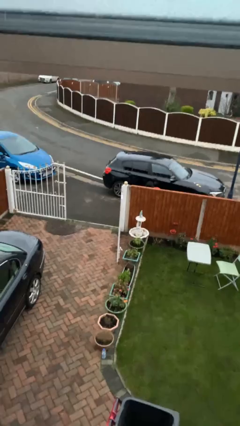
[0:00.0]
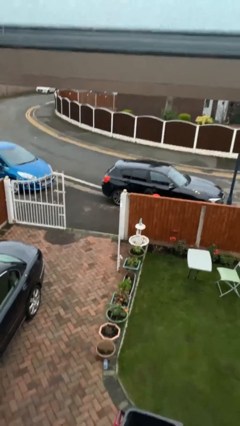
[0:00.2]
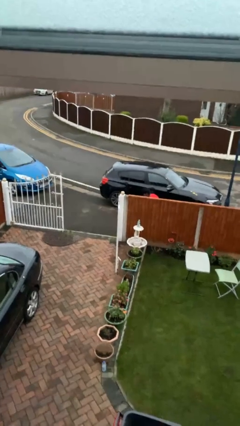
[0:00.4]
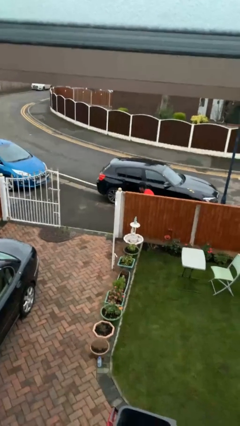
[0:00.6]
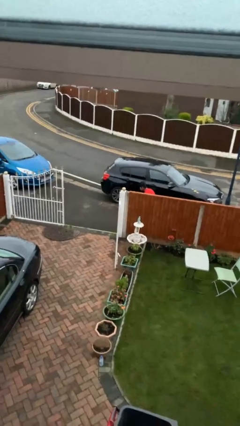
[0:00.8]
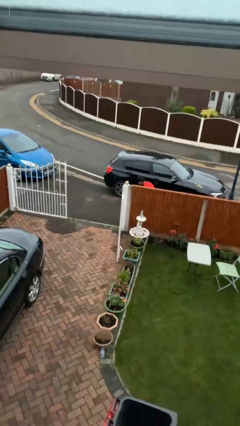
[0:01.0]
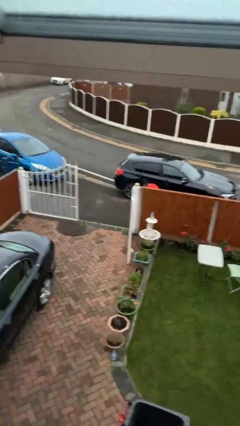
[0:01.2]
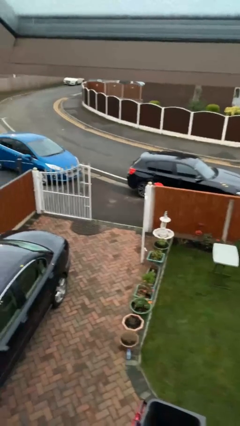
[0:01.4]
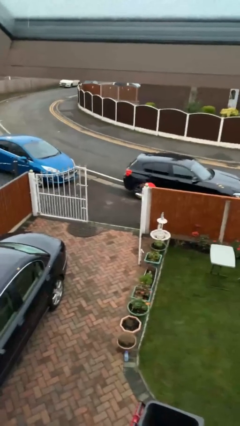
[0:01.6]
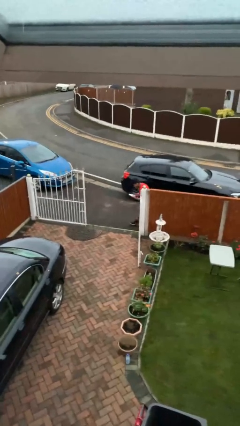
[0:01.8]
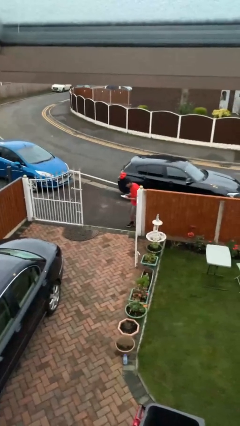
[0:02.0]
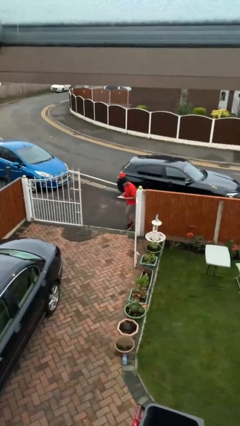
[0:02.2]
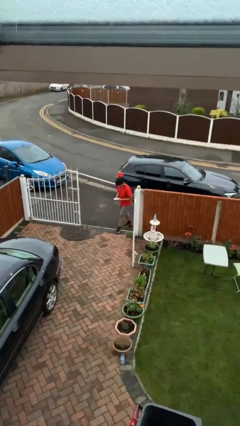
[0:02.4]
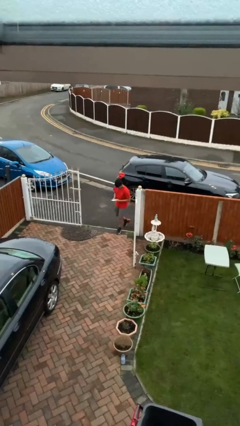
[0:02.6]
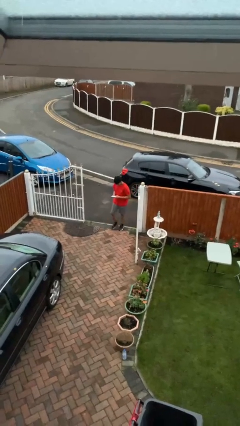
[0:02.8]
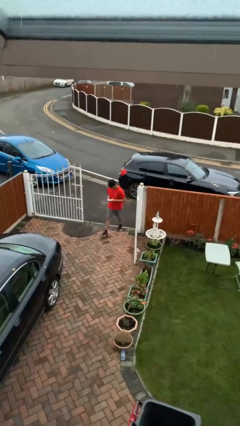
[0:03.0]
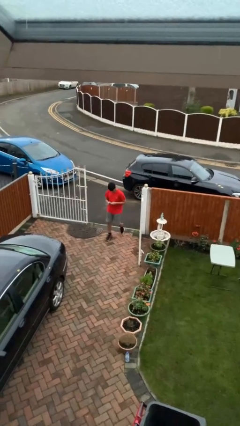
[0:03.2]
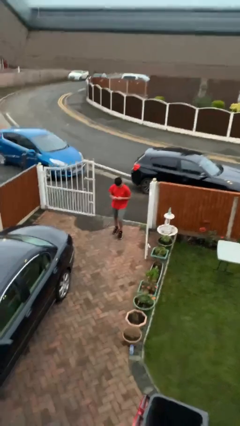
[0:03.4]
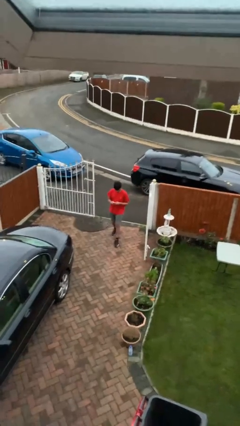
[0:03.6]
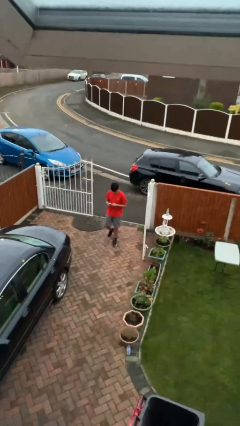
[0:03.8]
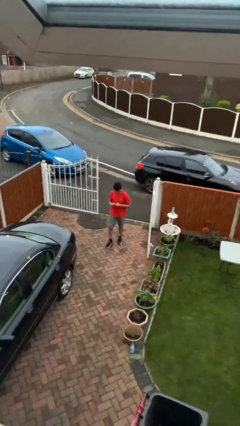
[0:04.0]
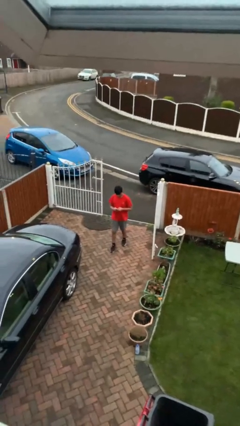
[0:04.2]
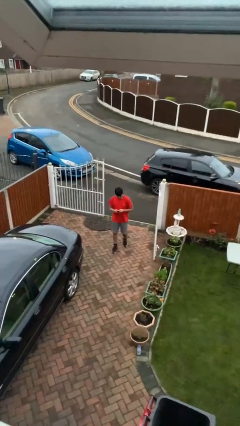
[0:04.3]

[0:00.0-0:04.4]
person enters scene through structure

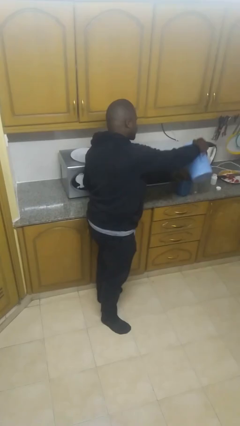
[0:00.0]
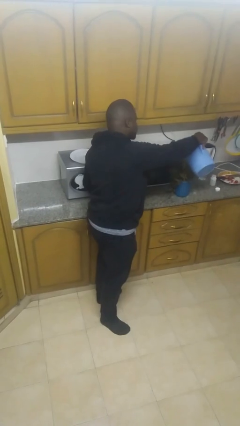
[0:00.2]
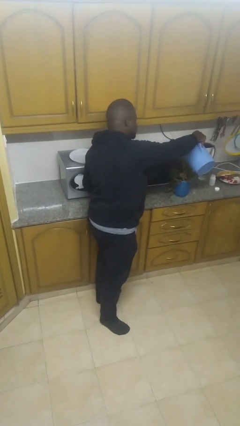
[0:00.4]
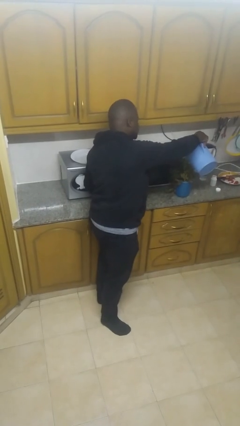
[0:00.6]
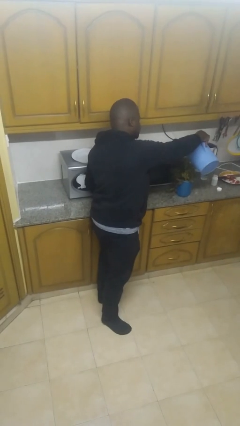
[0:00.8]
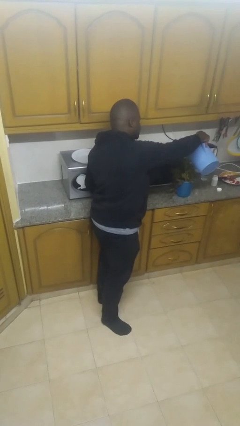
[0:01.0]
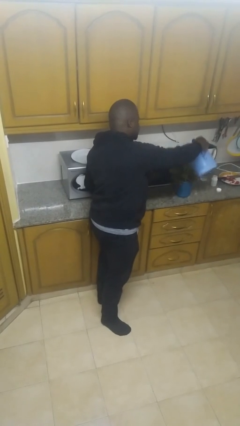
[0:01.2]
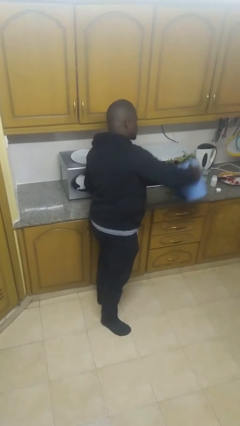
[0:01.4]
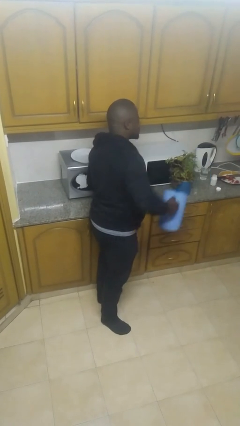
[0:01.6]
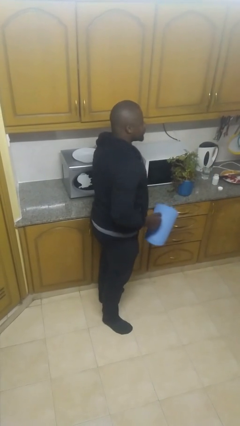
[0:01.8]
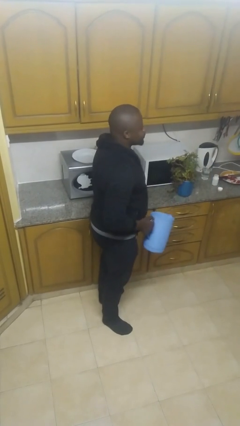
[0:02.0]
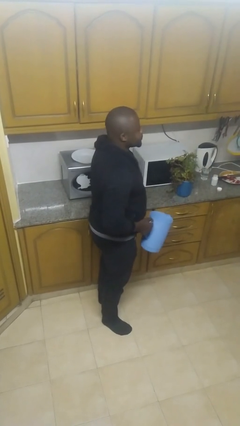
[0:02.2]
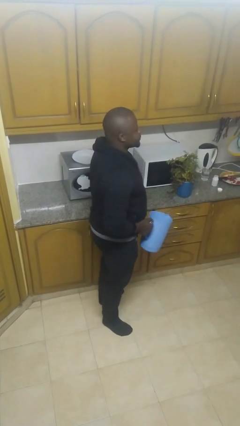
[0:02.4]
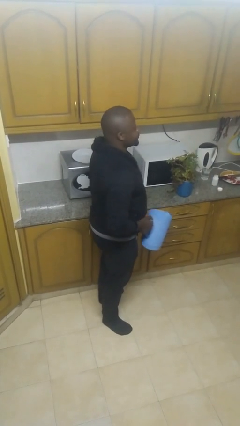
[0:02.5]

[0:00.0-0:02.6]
person waters houseplant

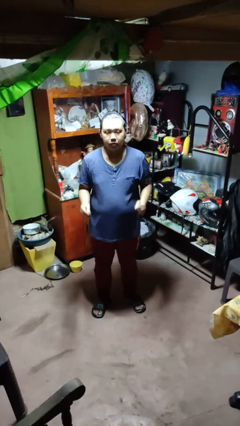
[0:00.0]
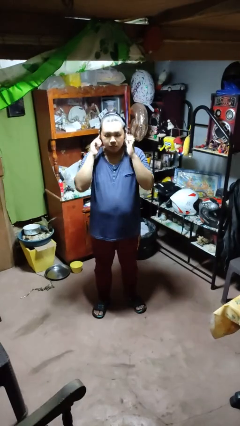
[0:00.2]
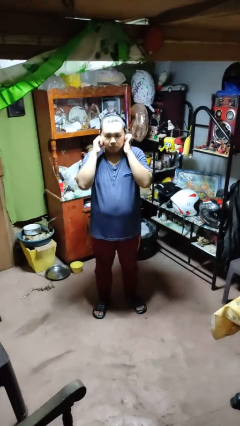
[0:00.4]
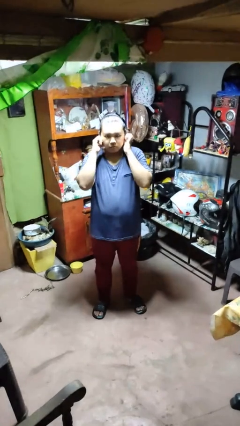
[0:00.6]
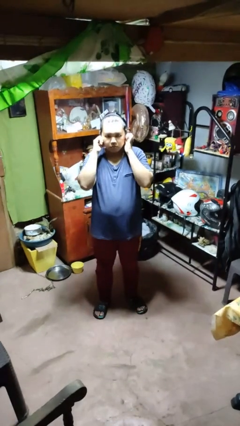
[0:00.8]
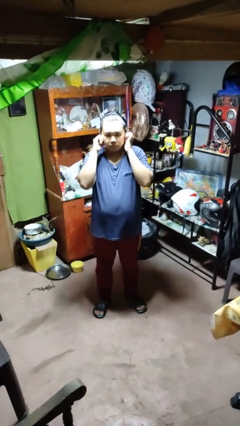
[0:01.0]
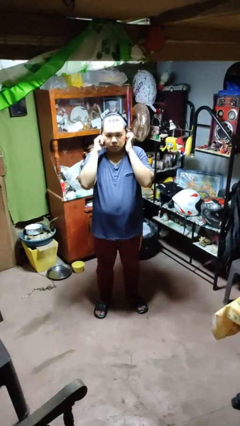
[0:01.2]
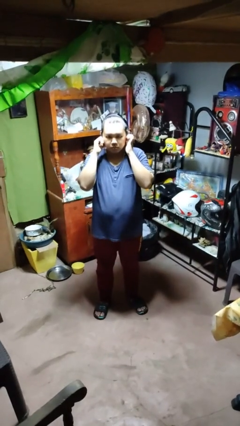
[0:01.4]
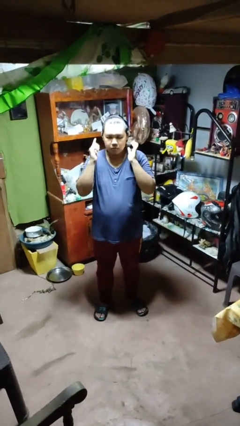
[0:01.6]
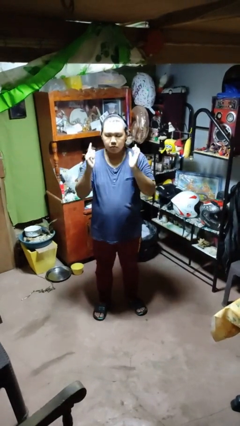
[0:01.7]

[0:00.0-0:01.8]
person puts fingers in ear

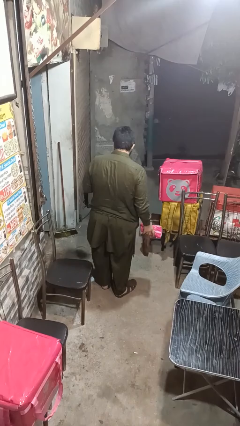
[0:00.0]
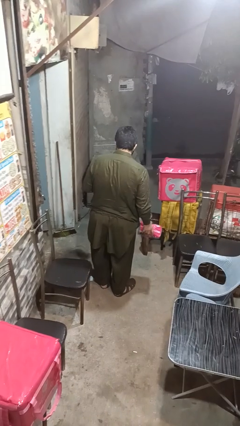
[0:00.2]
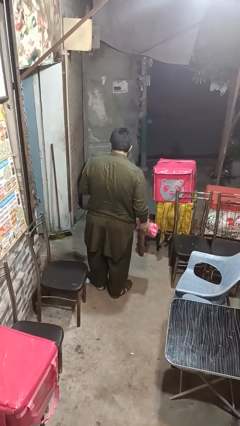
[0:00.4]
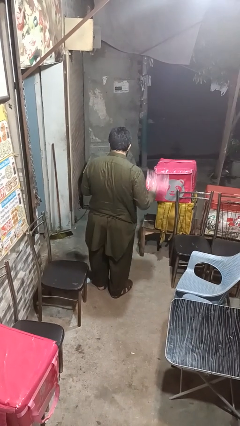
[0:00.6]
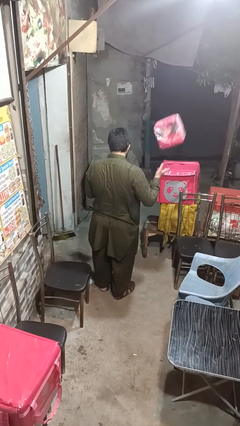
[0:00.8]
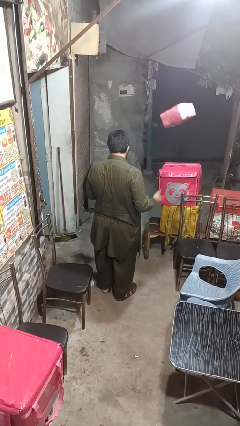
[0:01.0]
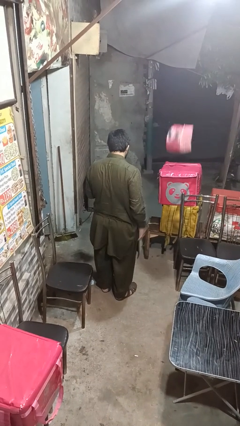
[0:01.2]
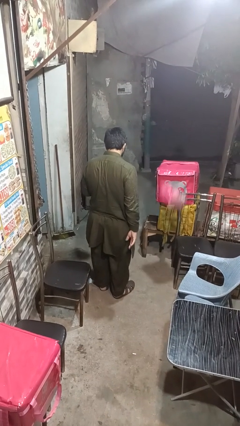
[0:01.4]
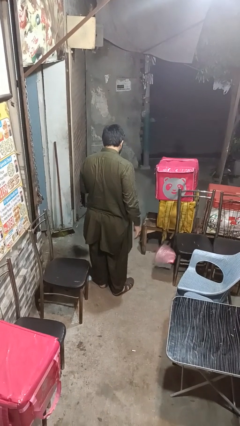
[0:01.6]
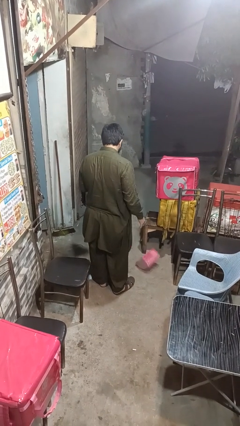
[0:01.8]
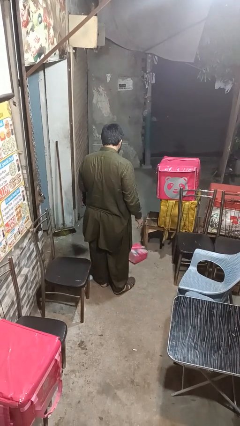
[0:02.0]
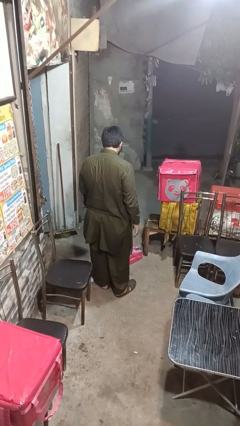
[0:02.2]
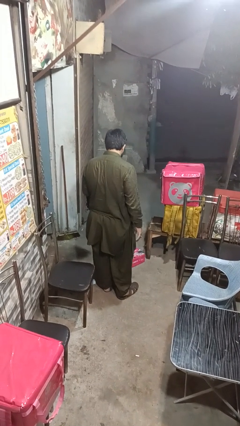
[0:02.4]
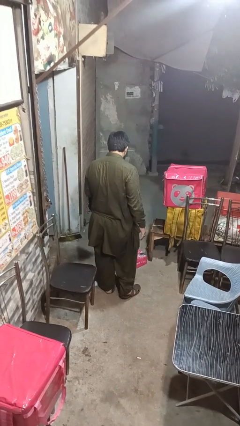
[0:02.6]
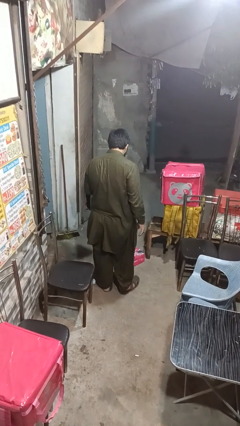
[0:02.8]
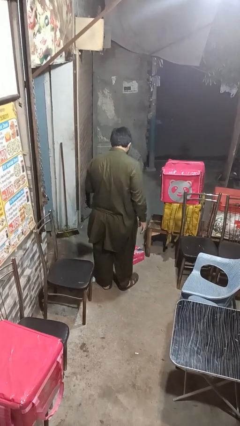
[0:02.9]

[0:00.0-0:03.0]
person throws object into air

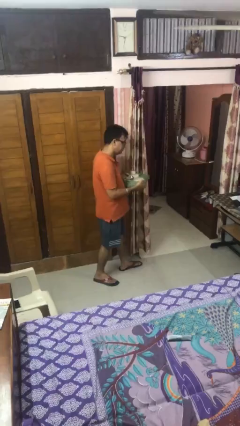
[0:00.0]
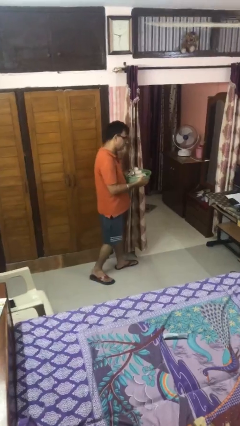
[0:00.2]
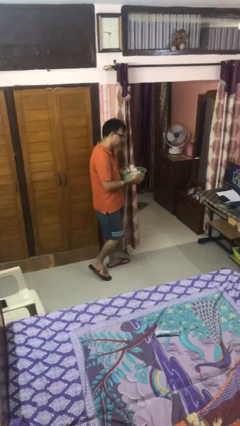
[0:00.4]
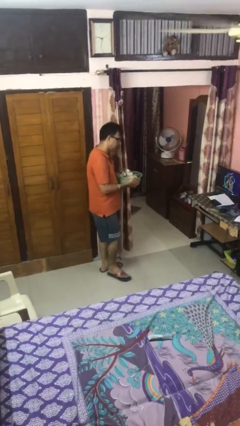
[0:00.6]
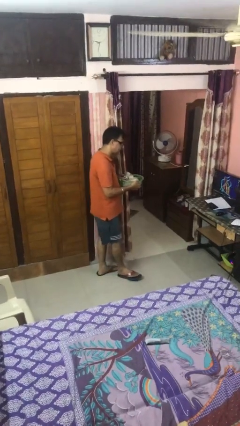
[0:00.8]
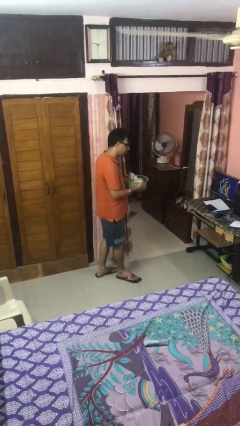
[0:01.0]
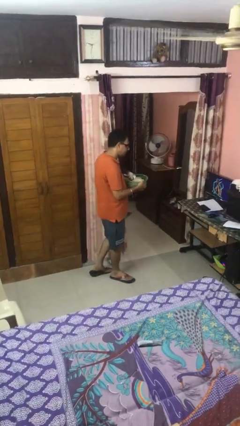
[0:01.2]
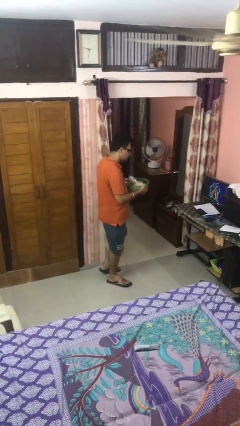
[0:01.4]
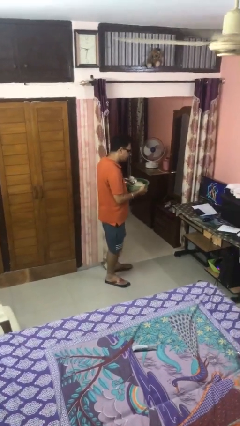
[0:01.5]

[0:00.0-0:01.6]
person carries groceries

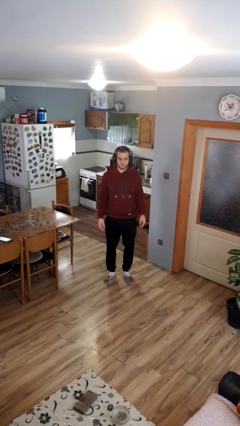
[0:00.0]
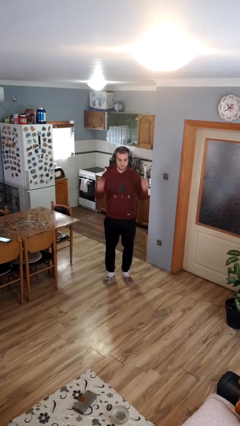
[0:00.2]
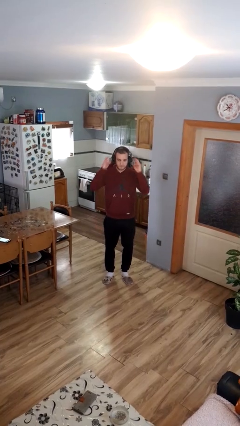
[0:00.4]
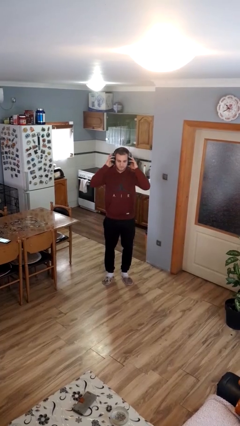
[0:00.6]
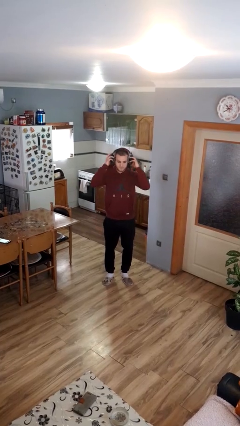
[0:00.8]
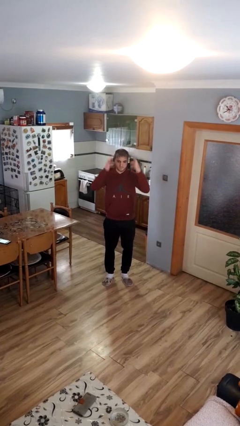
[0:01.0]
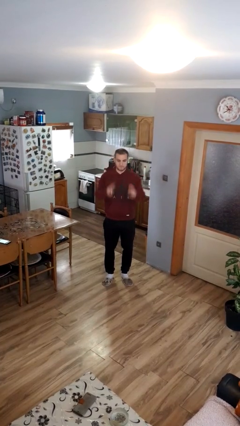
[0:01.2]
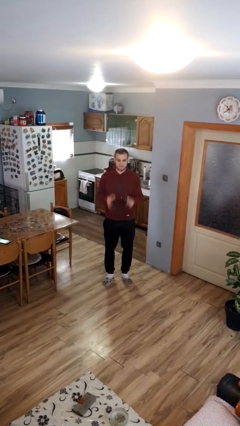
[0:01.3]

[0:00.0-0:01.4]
person takes off headphones

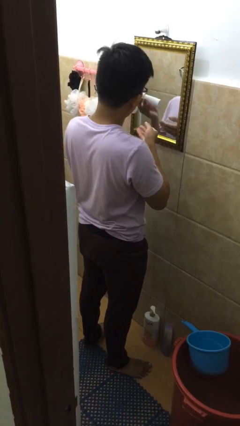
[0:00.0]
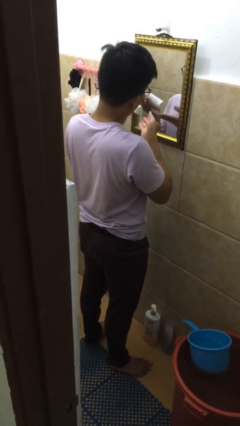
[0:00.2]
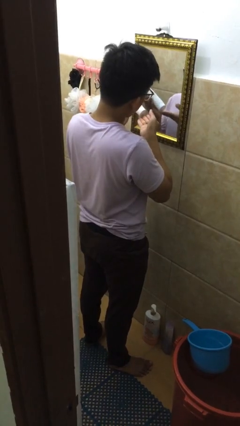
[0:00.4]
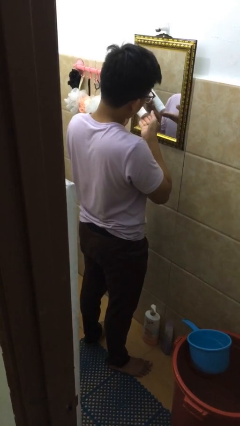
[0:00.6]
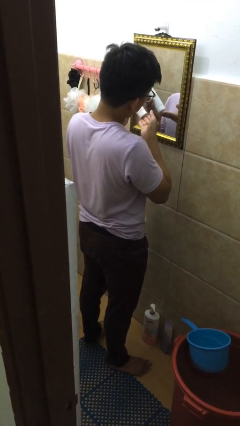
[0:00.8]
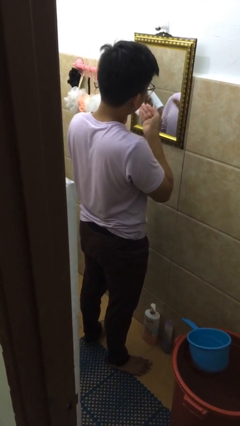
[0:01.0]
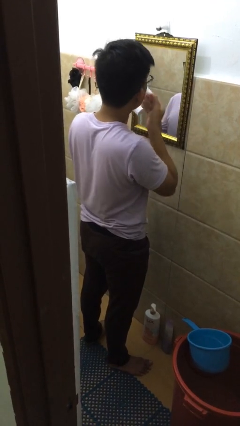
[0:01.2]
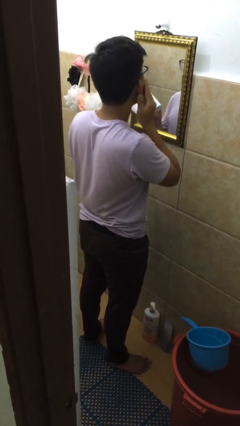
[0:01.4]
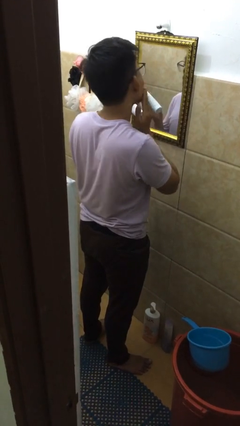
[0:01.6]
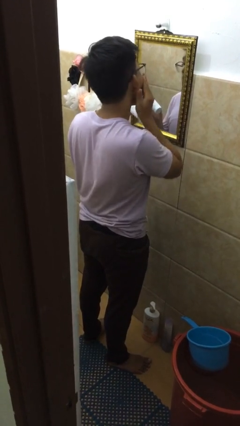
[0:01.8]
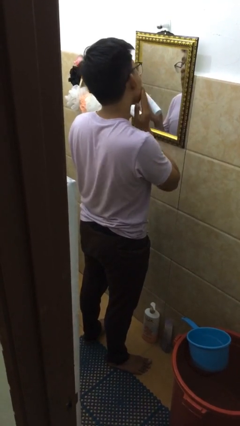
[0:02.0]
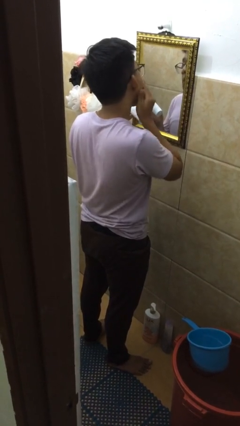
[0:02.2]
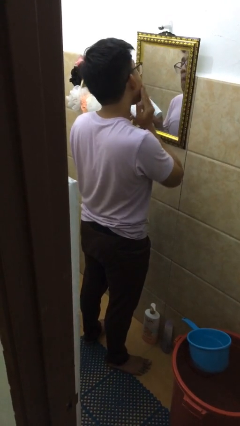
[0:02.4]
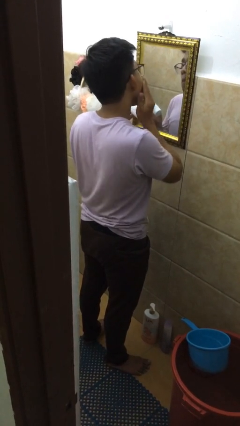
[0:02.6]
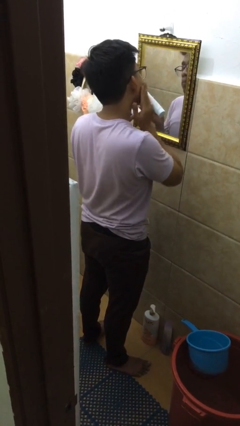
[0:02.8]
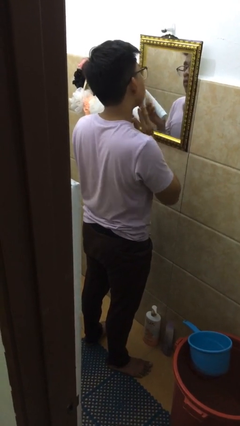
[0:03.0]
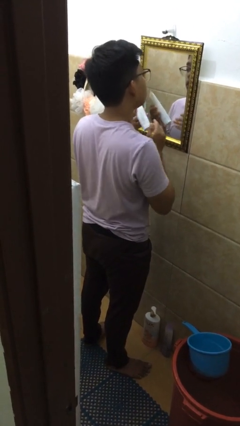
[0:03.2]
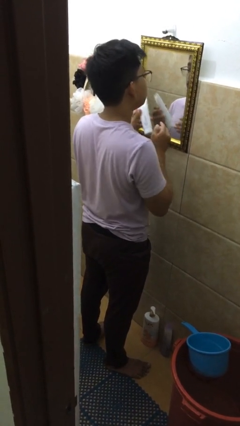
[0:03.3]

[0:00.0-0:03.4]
person applies facial moisturizer
